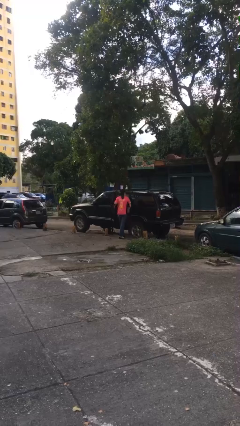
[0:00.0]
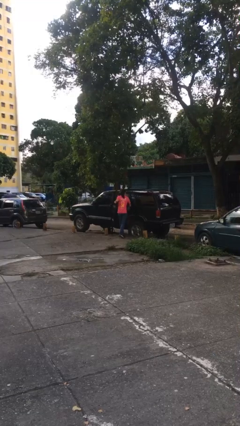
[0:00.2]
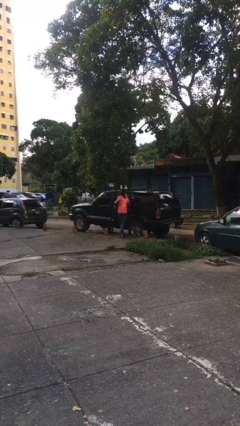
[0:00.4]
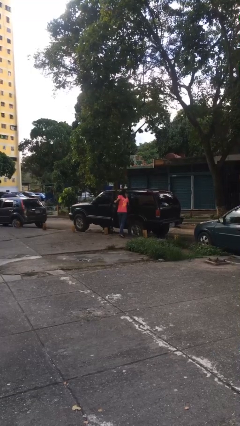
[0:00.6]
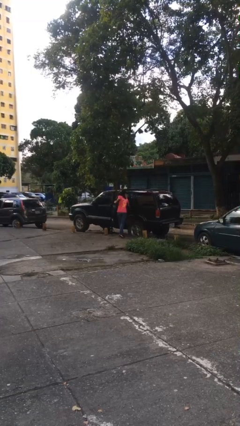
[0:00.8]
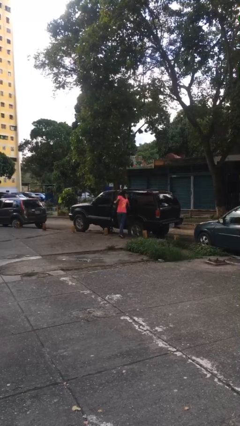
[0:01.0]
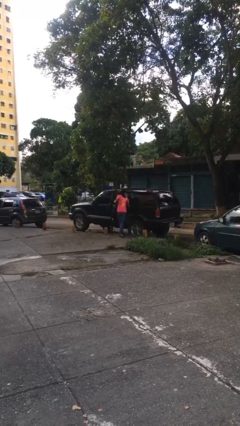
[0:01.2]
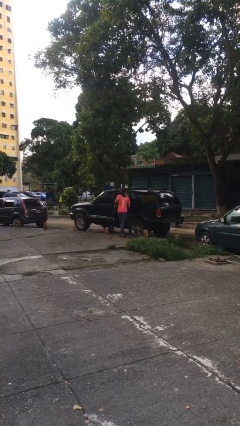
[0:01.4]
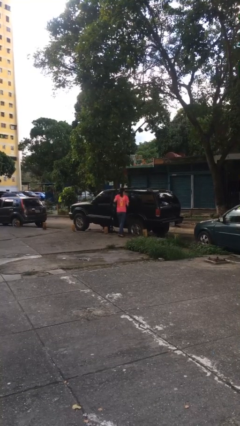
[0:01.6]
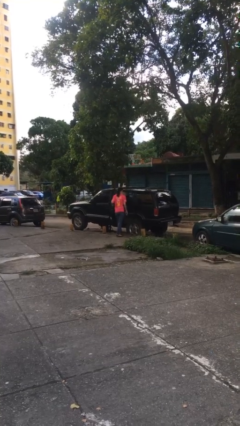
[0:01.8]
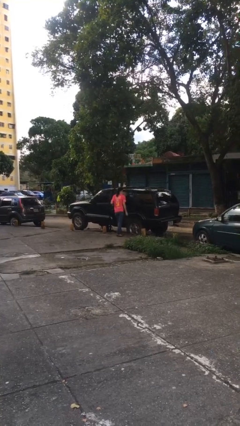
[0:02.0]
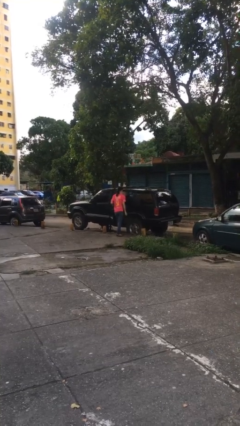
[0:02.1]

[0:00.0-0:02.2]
person loads car

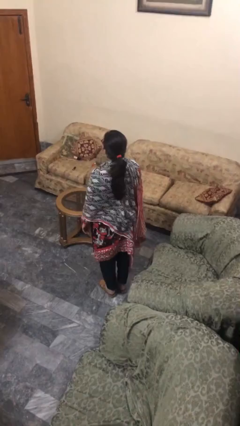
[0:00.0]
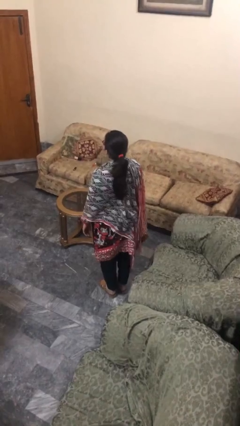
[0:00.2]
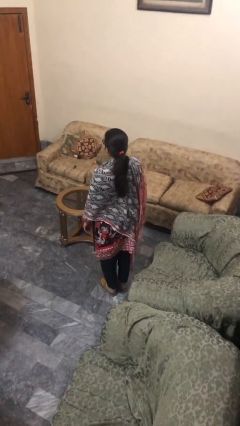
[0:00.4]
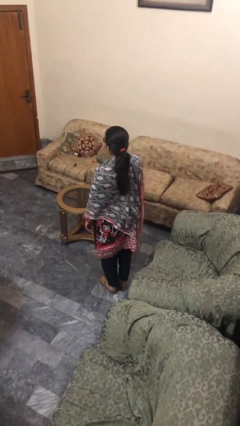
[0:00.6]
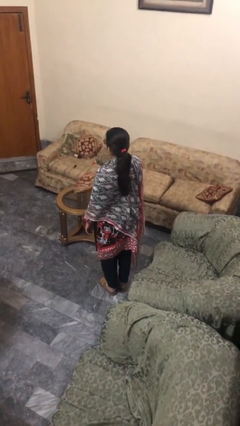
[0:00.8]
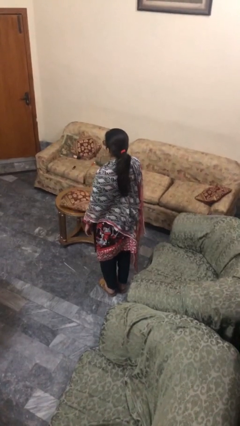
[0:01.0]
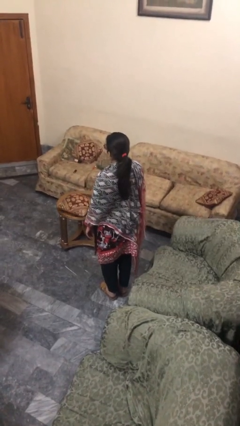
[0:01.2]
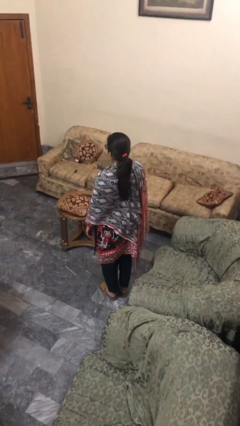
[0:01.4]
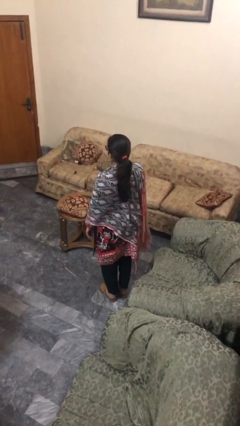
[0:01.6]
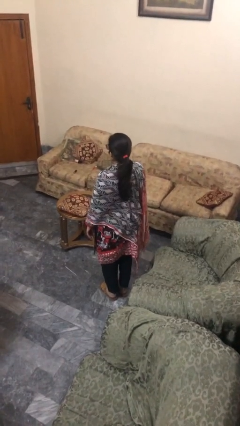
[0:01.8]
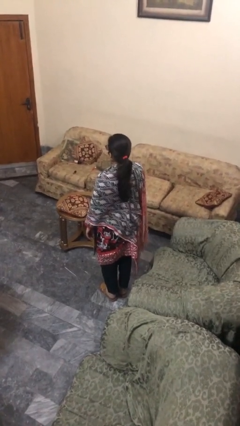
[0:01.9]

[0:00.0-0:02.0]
person throws object on table

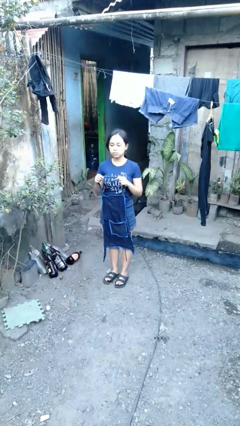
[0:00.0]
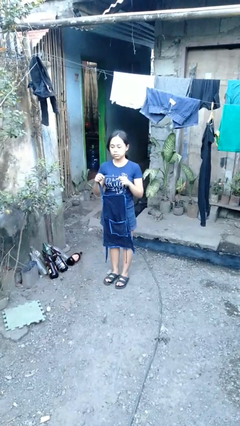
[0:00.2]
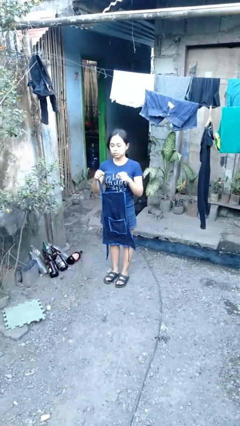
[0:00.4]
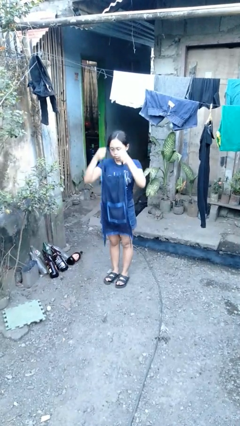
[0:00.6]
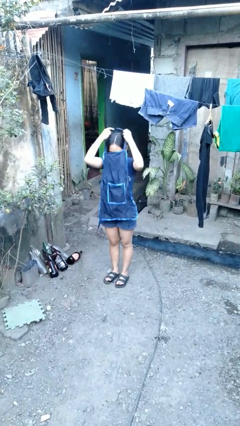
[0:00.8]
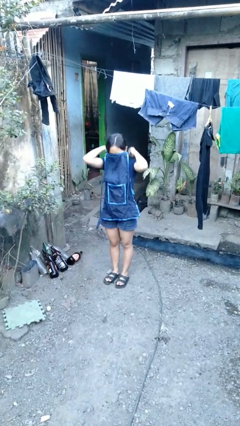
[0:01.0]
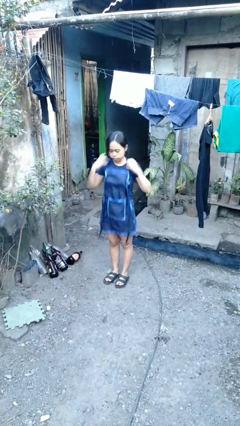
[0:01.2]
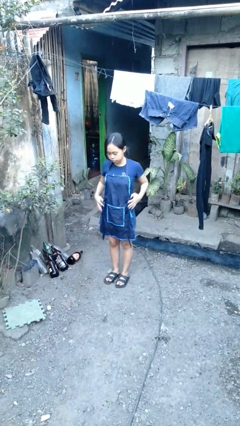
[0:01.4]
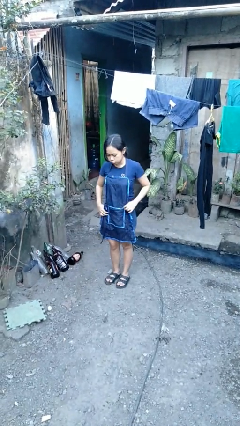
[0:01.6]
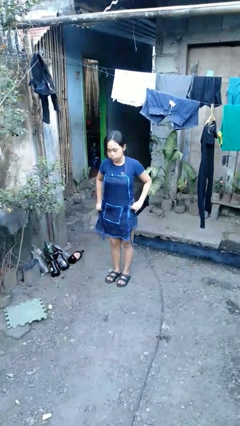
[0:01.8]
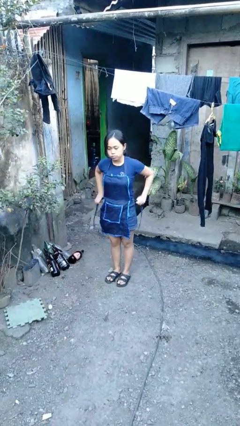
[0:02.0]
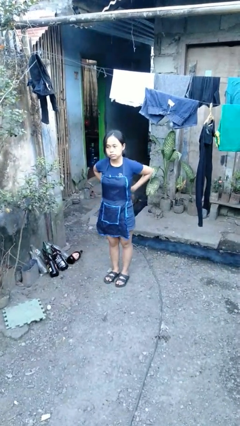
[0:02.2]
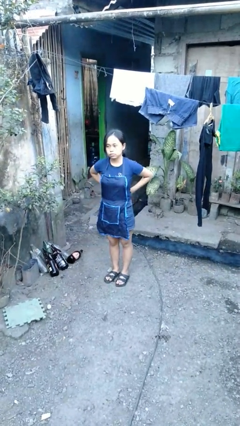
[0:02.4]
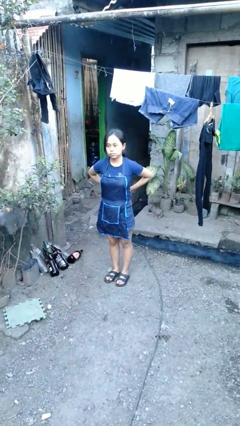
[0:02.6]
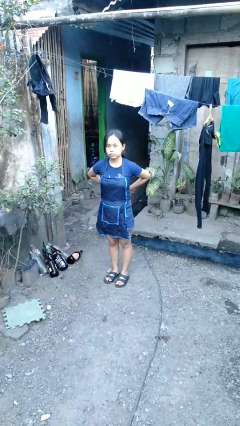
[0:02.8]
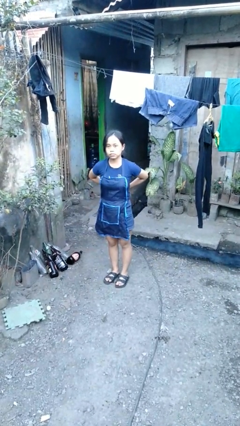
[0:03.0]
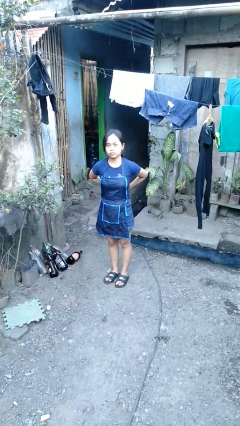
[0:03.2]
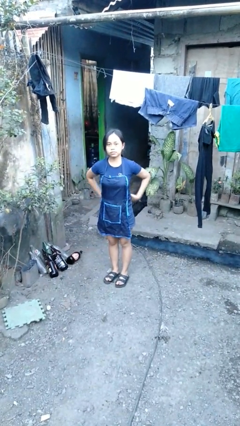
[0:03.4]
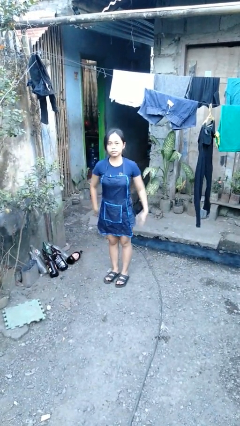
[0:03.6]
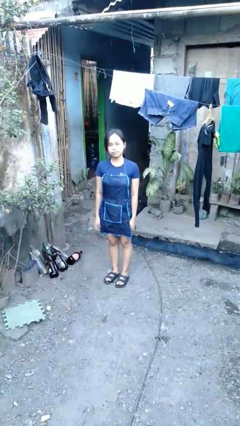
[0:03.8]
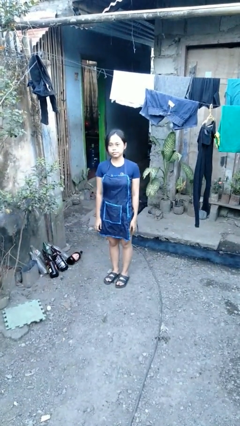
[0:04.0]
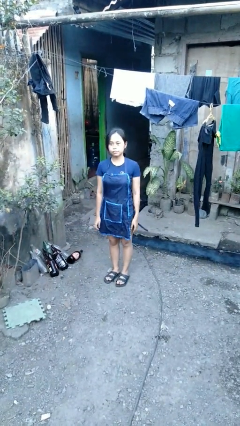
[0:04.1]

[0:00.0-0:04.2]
person puts on apron

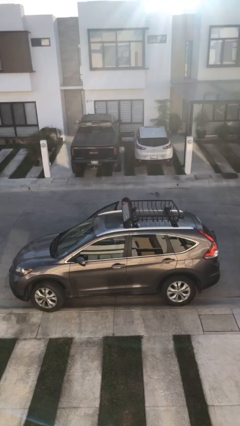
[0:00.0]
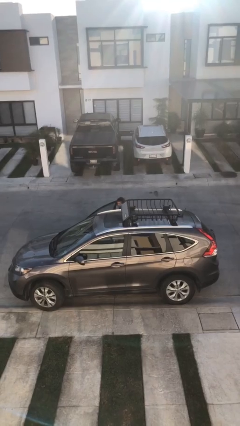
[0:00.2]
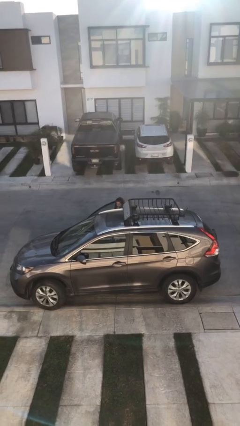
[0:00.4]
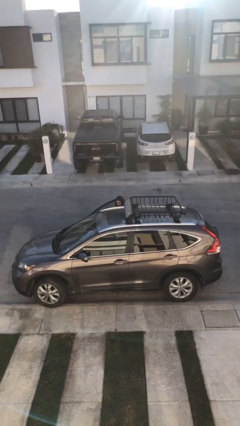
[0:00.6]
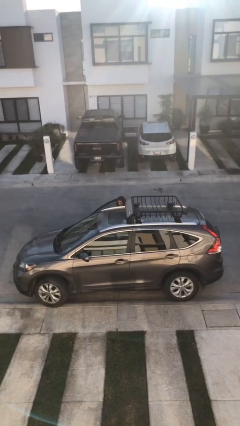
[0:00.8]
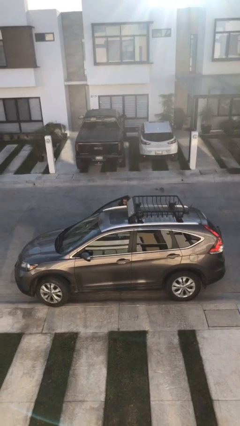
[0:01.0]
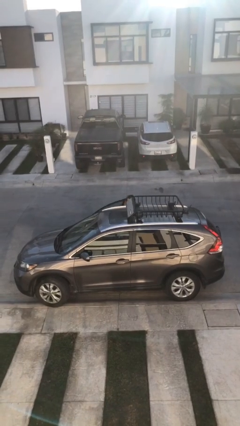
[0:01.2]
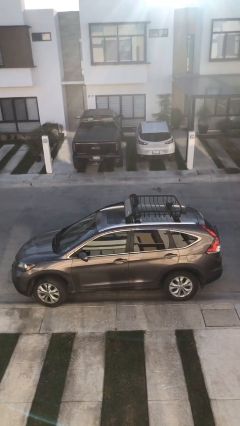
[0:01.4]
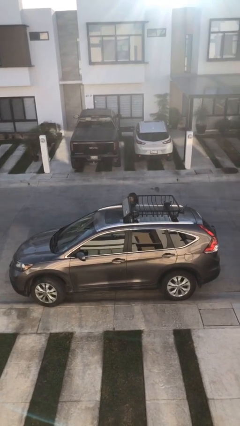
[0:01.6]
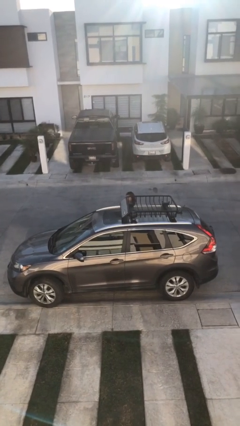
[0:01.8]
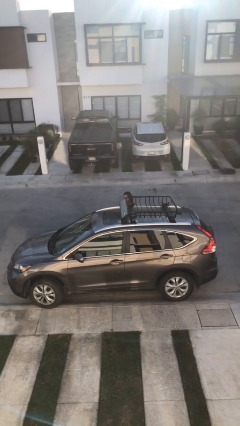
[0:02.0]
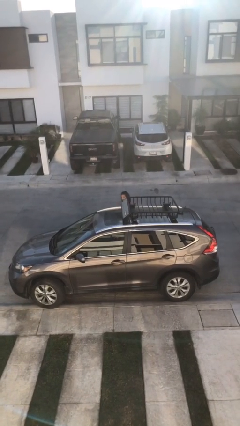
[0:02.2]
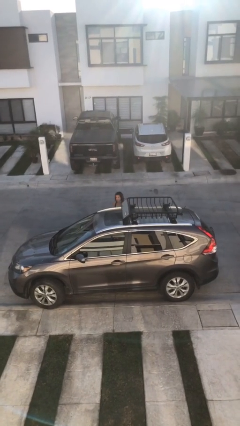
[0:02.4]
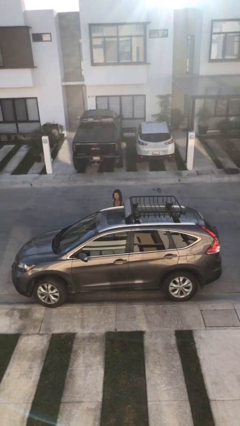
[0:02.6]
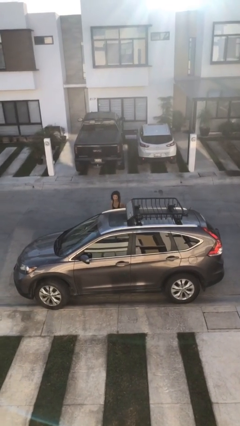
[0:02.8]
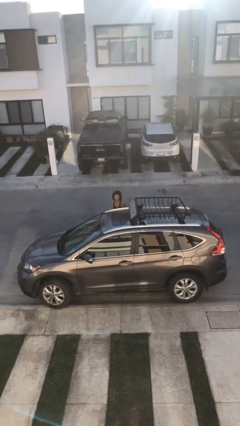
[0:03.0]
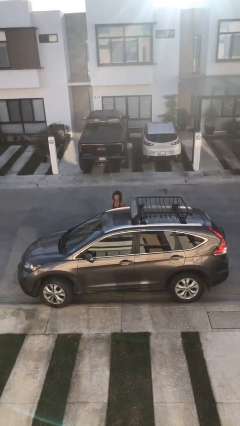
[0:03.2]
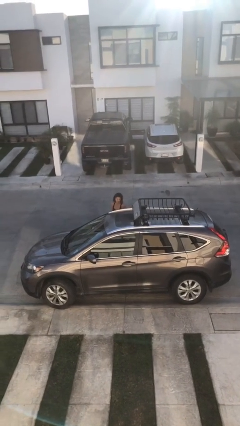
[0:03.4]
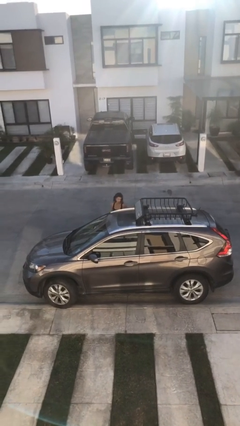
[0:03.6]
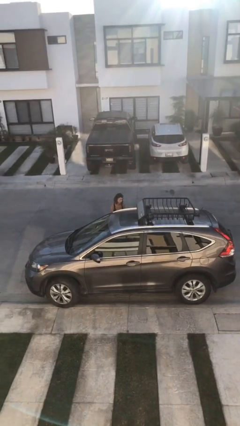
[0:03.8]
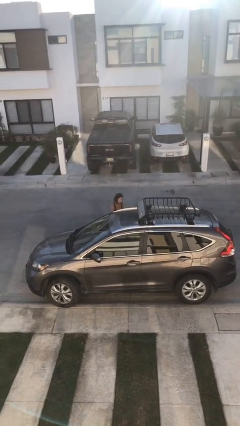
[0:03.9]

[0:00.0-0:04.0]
person opens car door

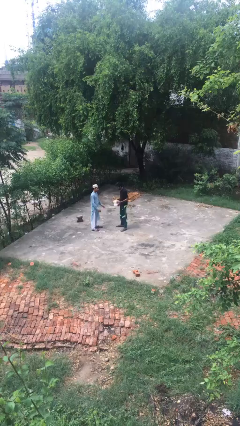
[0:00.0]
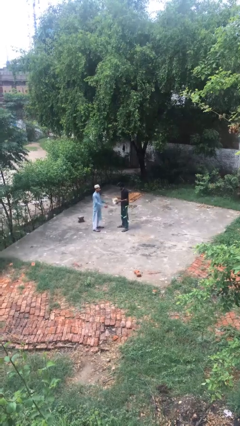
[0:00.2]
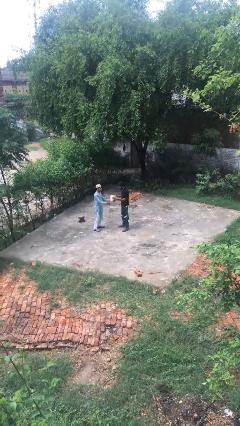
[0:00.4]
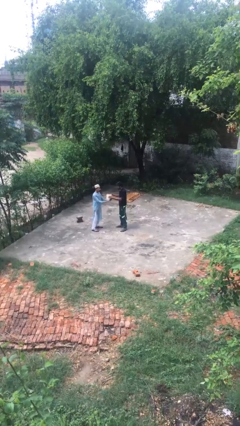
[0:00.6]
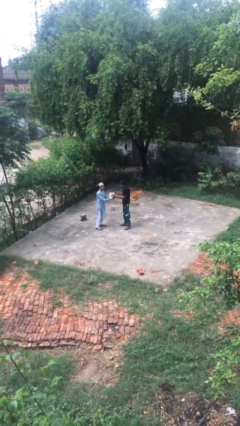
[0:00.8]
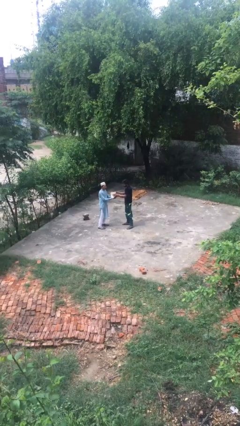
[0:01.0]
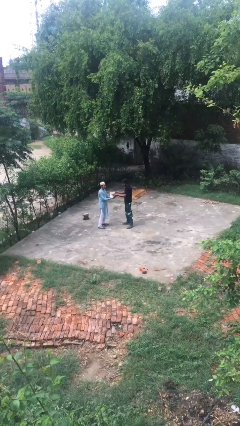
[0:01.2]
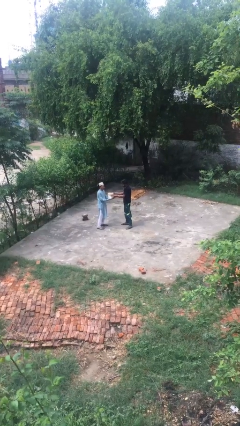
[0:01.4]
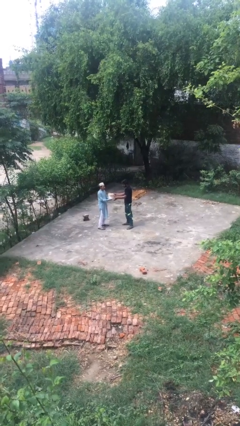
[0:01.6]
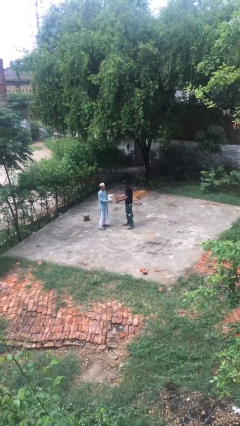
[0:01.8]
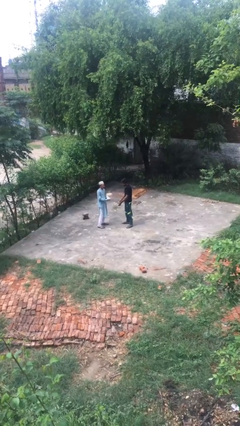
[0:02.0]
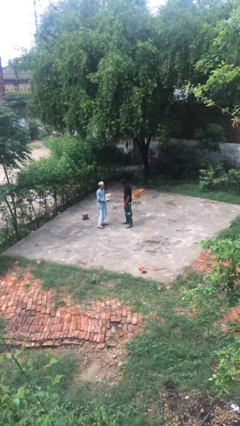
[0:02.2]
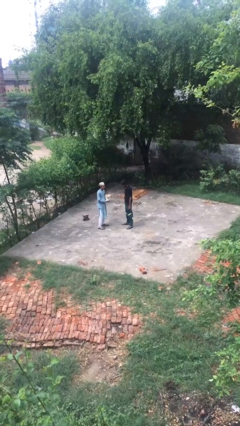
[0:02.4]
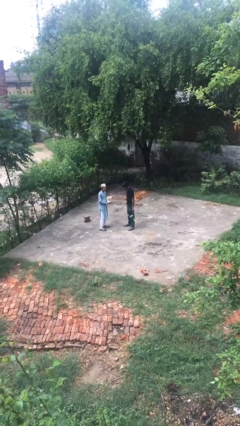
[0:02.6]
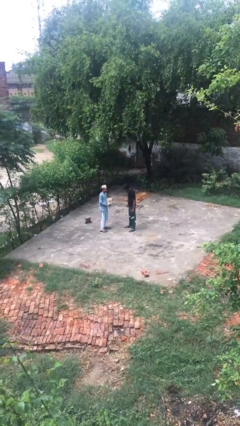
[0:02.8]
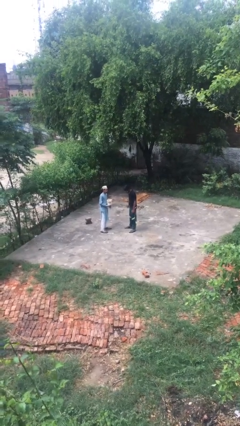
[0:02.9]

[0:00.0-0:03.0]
person transfers object to person

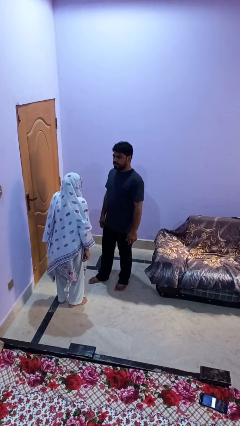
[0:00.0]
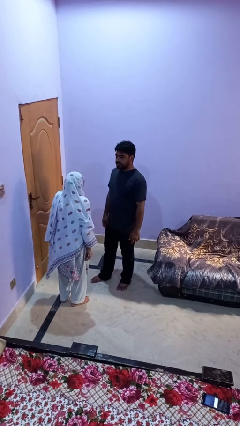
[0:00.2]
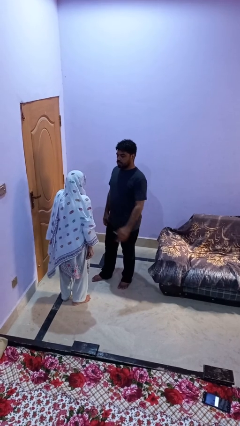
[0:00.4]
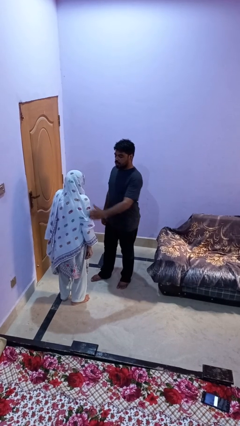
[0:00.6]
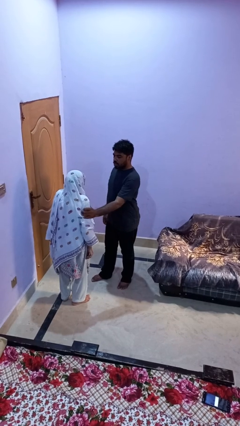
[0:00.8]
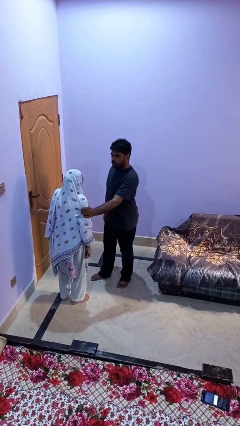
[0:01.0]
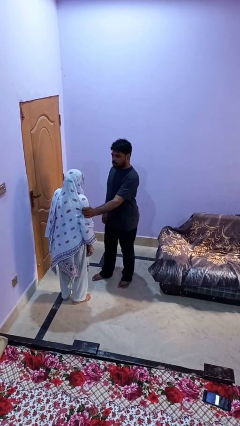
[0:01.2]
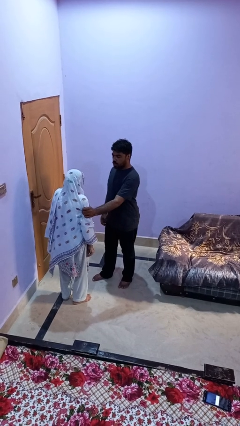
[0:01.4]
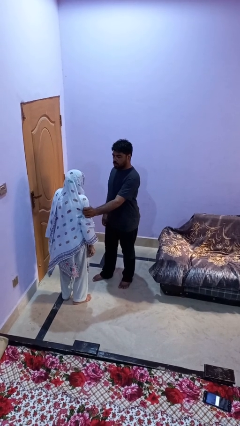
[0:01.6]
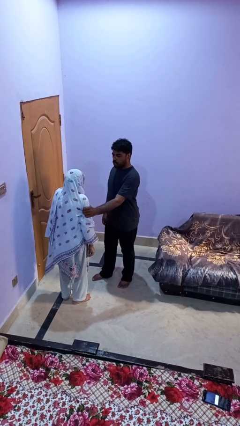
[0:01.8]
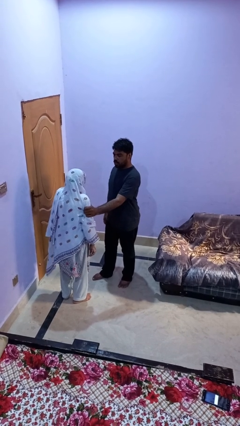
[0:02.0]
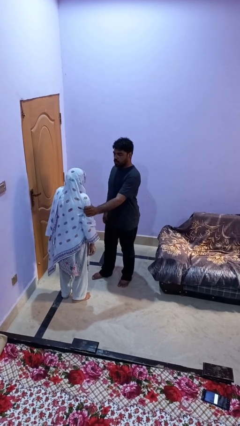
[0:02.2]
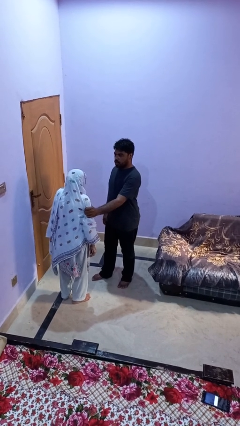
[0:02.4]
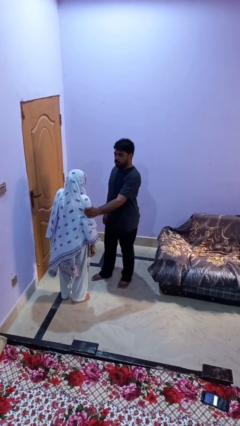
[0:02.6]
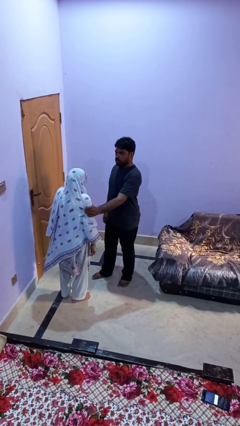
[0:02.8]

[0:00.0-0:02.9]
person grabs person by bicep
